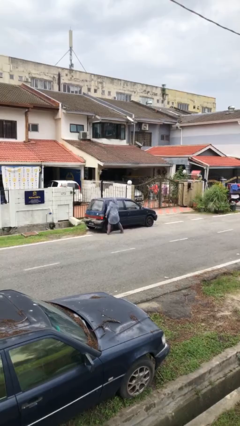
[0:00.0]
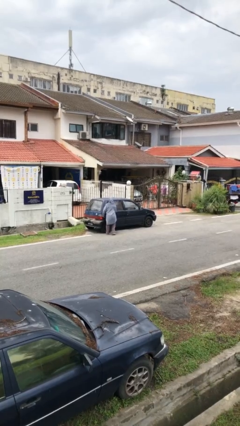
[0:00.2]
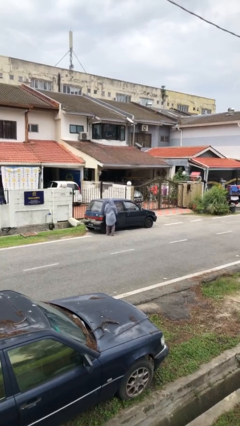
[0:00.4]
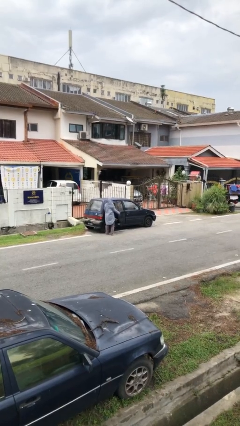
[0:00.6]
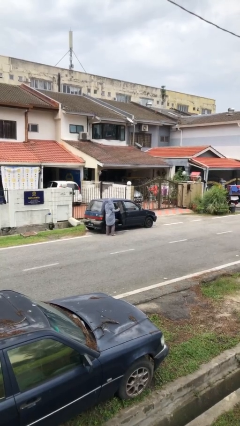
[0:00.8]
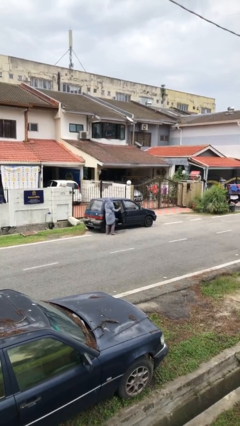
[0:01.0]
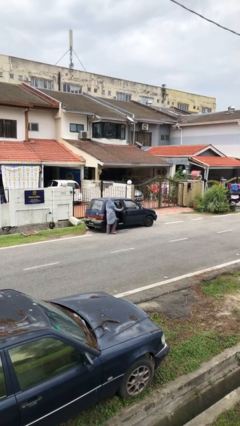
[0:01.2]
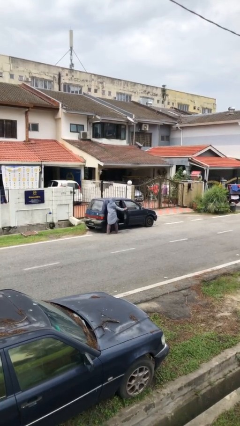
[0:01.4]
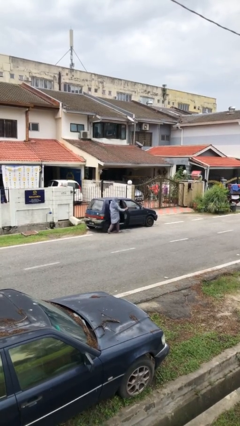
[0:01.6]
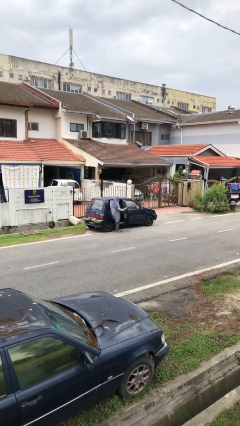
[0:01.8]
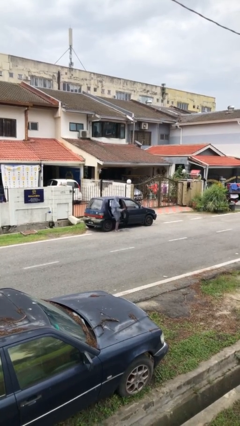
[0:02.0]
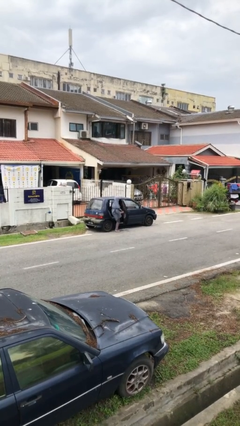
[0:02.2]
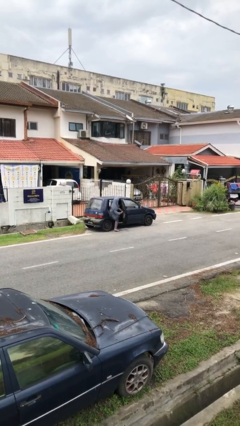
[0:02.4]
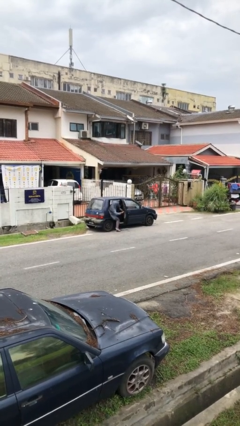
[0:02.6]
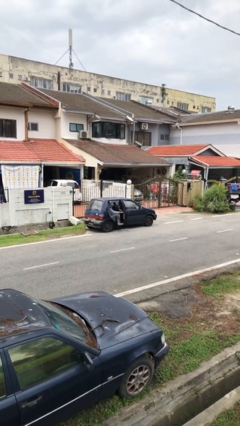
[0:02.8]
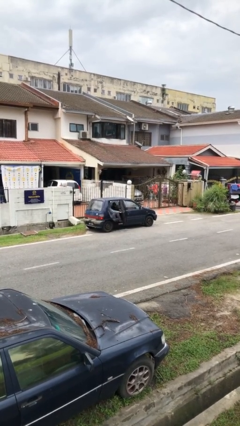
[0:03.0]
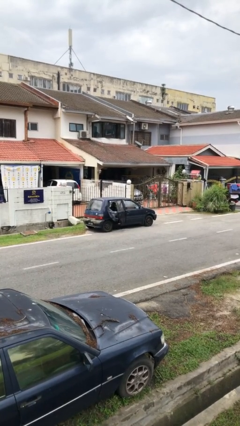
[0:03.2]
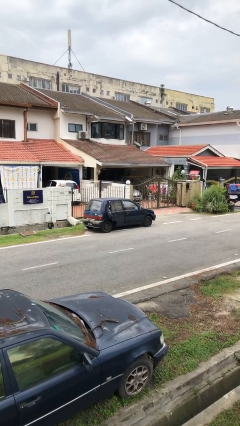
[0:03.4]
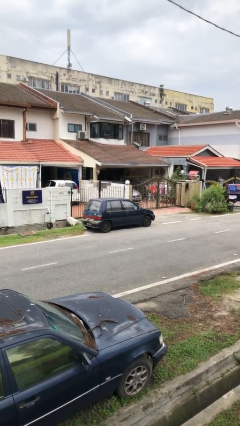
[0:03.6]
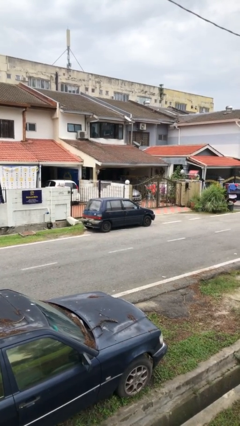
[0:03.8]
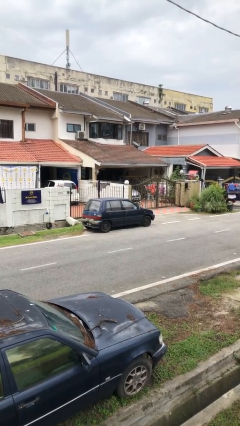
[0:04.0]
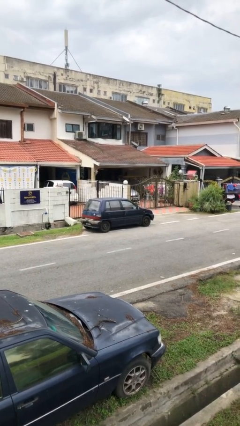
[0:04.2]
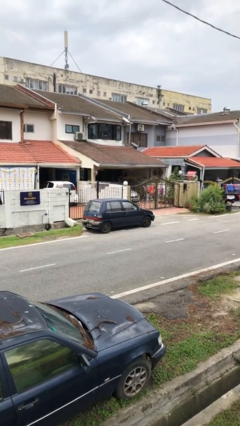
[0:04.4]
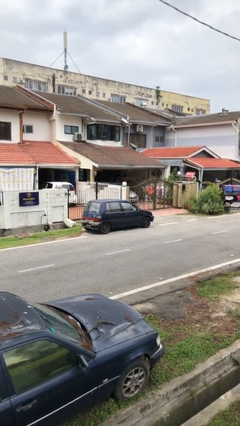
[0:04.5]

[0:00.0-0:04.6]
car picks up person

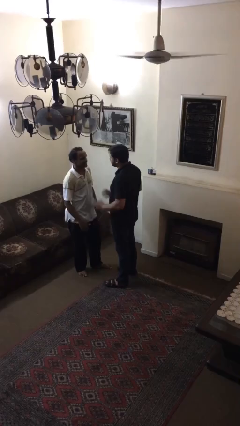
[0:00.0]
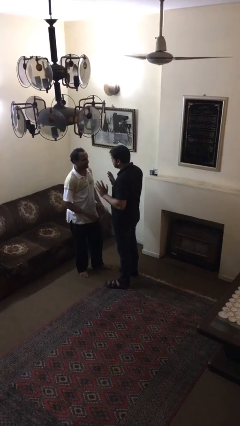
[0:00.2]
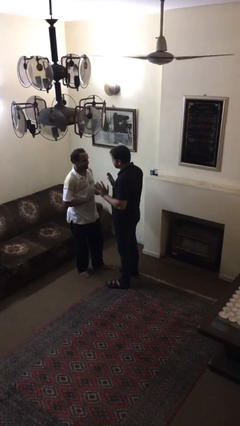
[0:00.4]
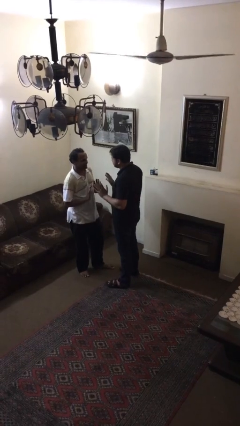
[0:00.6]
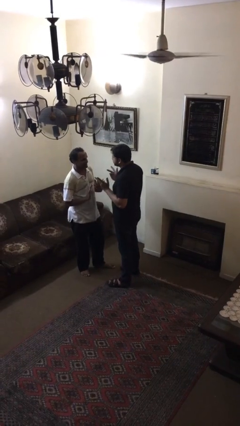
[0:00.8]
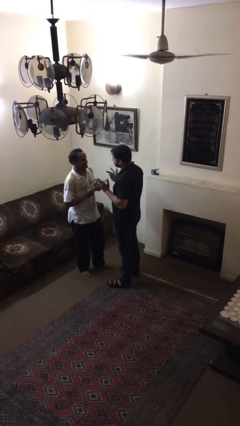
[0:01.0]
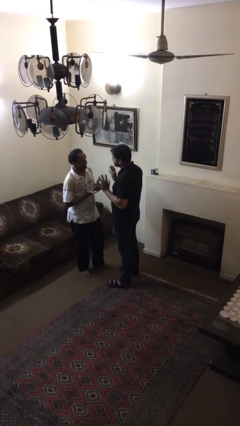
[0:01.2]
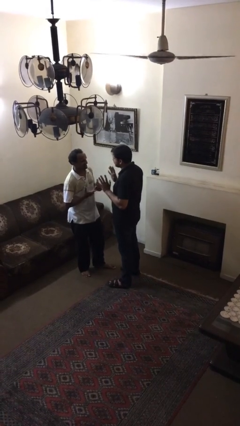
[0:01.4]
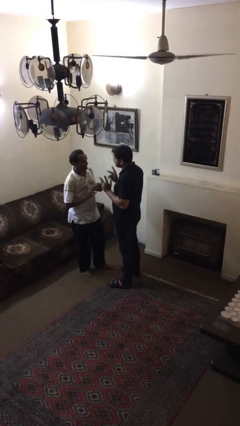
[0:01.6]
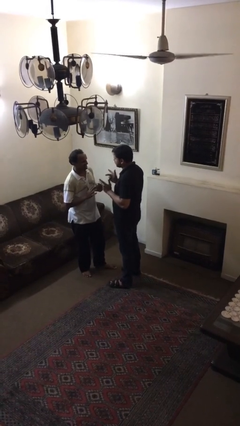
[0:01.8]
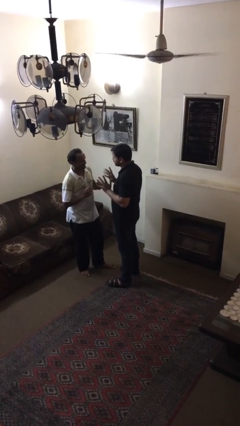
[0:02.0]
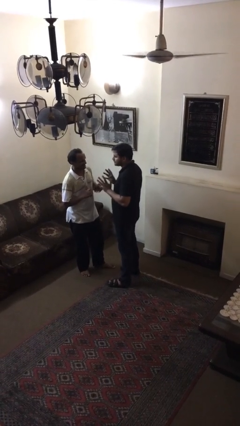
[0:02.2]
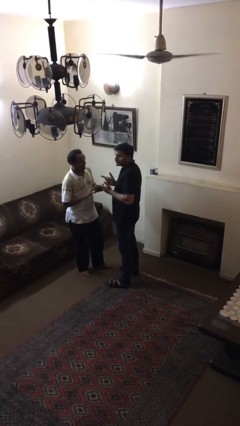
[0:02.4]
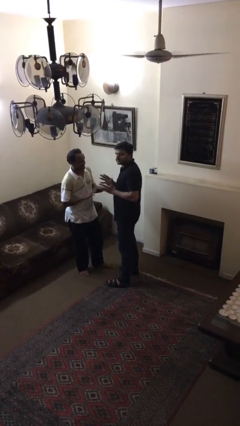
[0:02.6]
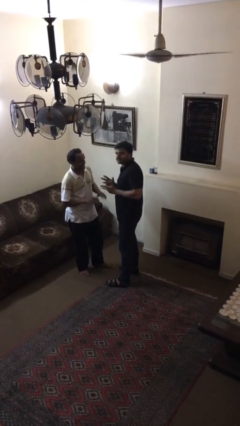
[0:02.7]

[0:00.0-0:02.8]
person talks to person

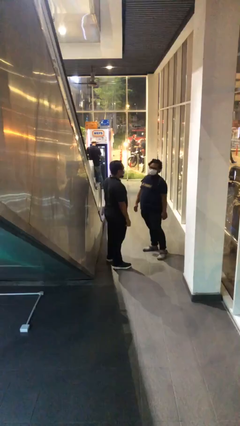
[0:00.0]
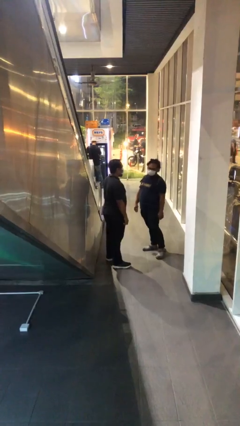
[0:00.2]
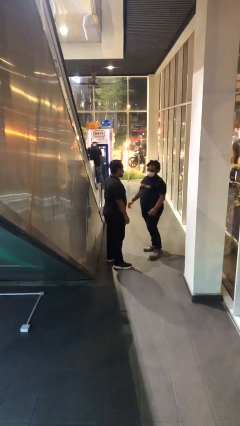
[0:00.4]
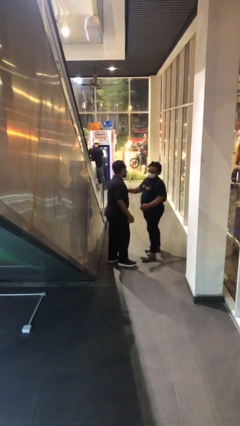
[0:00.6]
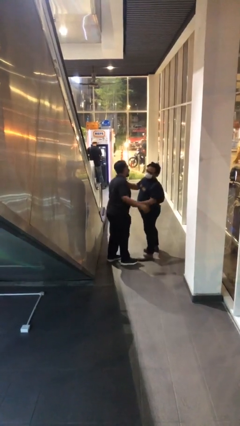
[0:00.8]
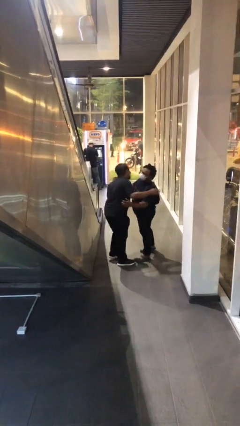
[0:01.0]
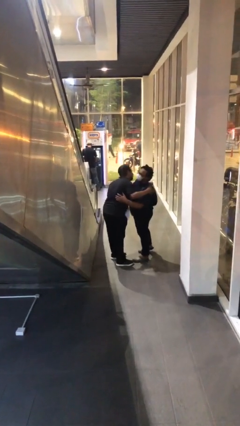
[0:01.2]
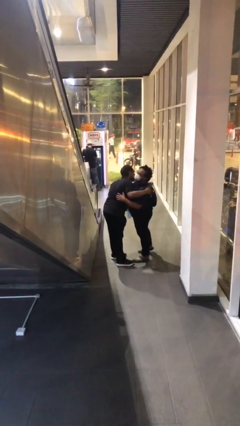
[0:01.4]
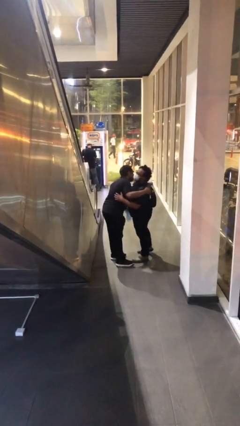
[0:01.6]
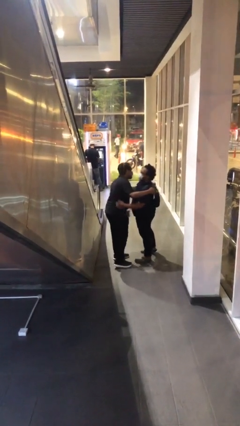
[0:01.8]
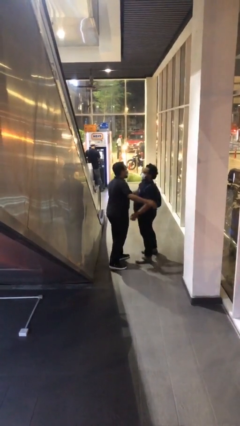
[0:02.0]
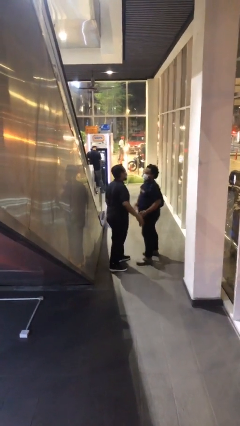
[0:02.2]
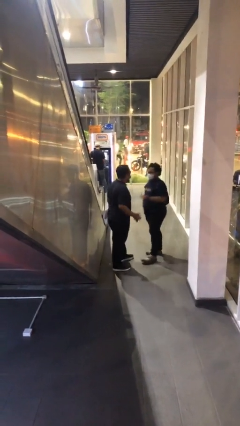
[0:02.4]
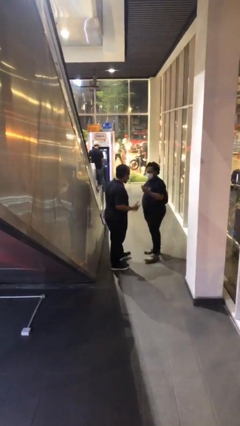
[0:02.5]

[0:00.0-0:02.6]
person embraces person

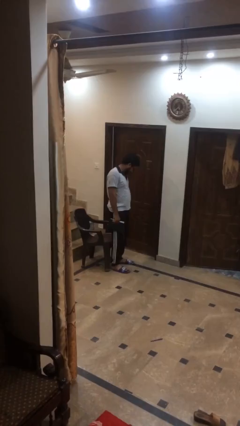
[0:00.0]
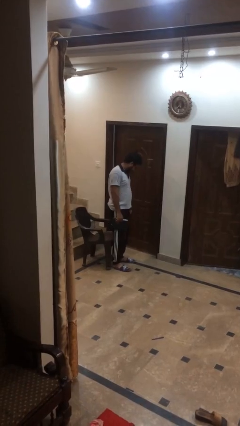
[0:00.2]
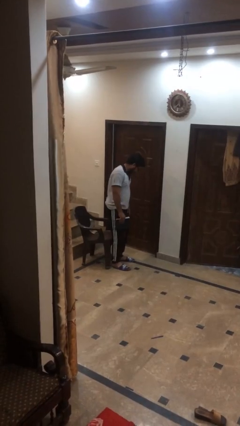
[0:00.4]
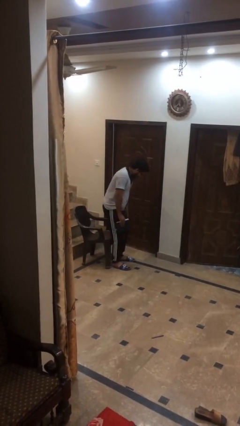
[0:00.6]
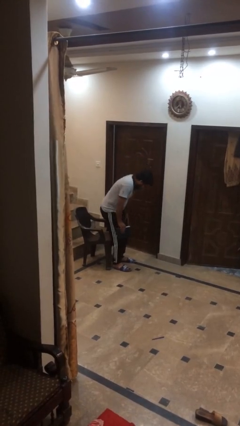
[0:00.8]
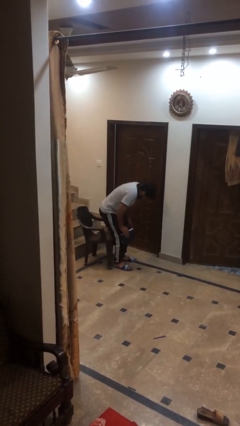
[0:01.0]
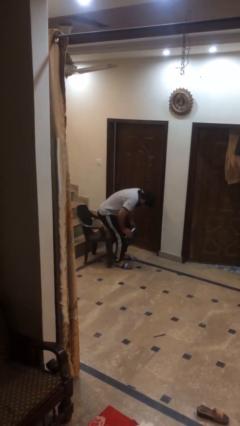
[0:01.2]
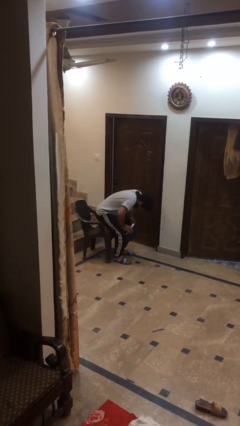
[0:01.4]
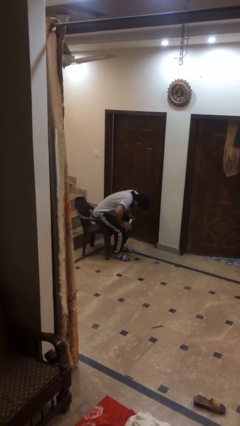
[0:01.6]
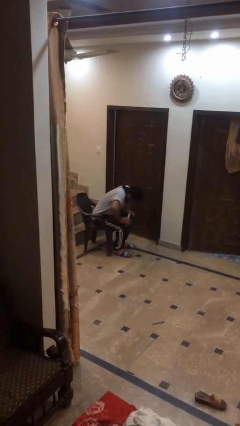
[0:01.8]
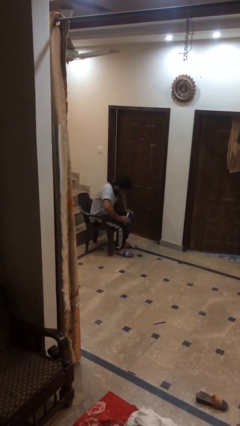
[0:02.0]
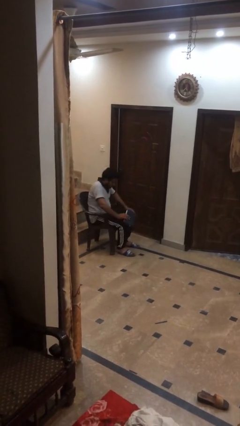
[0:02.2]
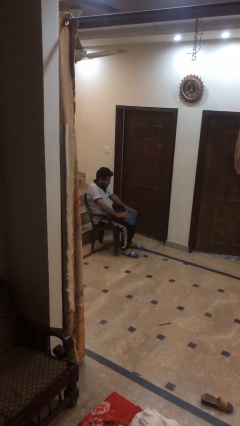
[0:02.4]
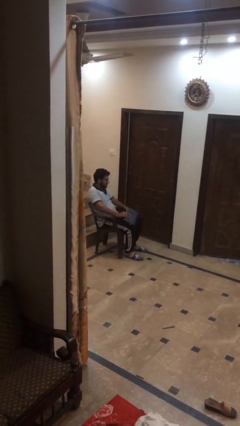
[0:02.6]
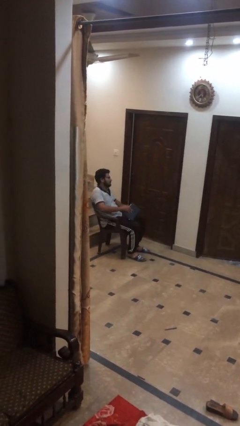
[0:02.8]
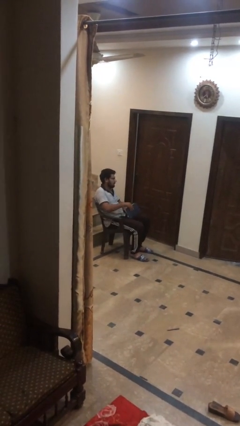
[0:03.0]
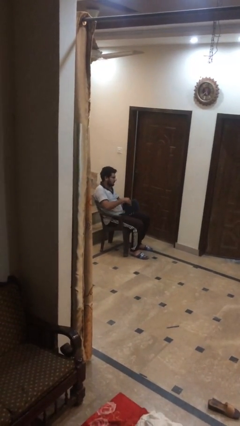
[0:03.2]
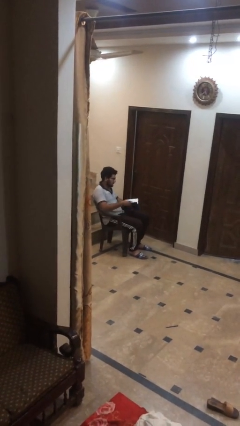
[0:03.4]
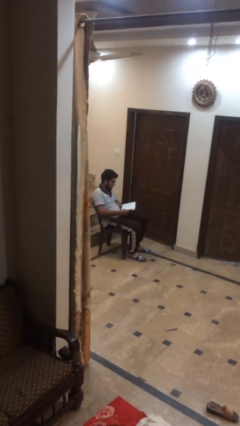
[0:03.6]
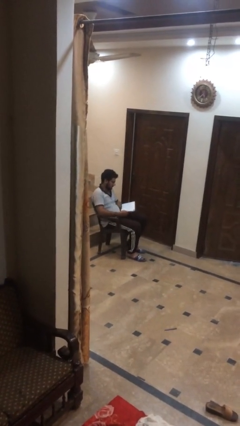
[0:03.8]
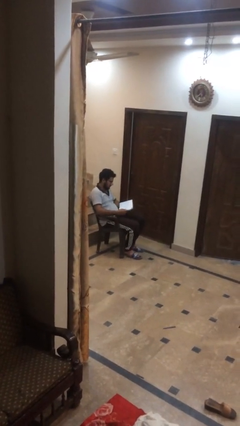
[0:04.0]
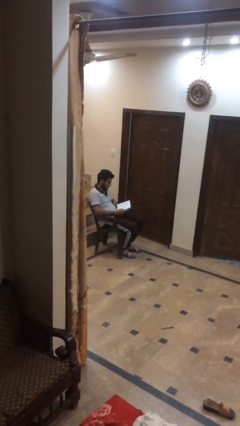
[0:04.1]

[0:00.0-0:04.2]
person sits down

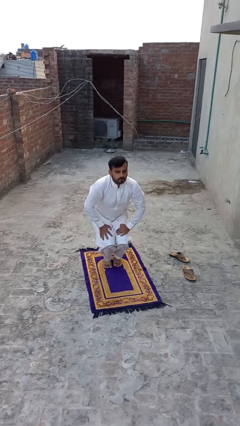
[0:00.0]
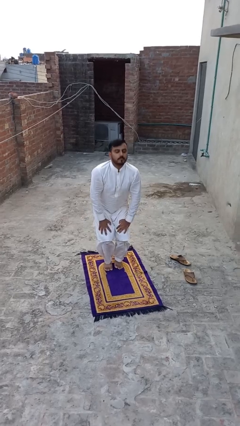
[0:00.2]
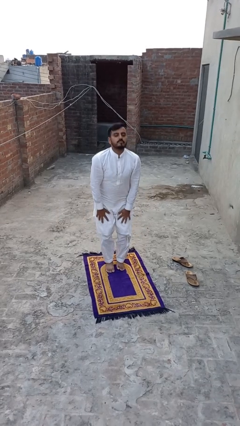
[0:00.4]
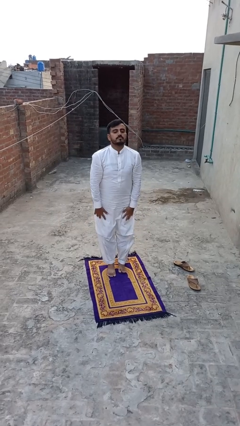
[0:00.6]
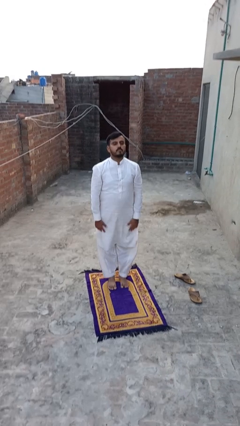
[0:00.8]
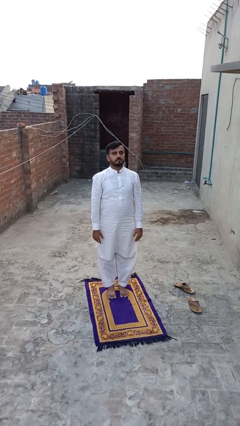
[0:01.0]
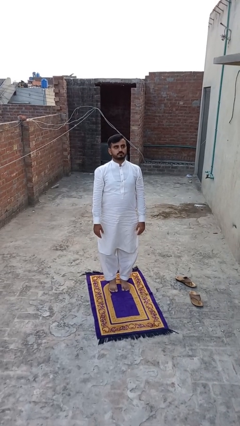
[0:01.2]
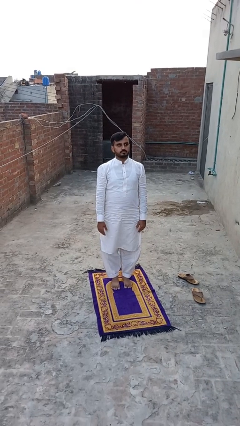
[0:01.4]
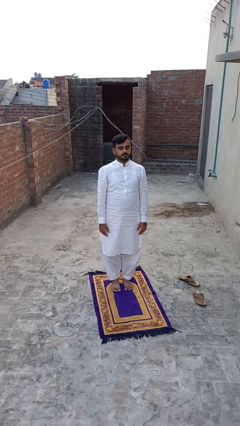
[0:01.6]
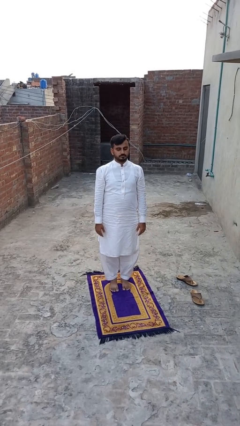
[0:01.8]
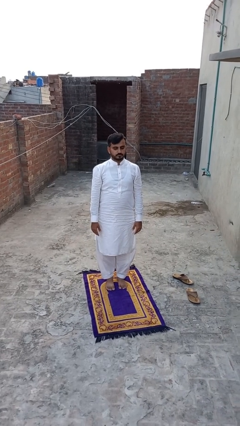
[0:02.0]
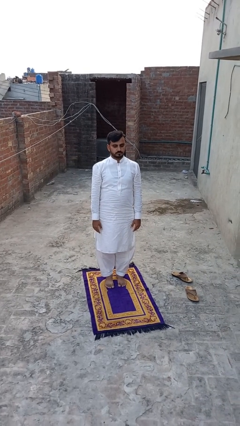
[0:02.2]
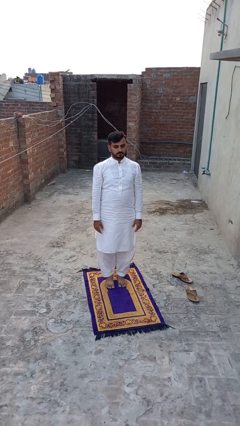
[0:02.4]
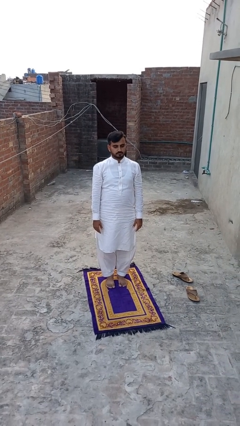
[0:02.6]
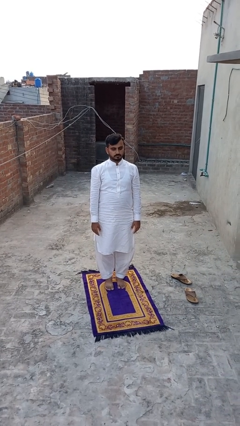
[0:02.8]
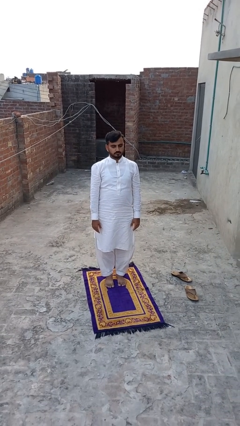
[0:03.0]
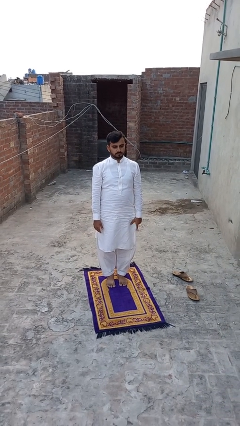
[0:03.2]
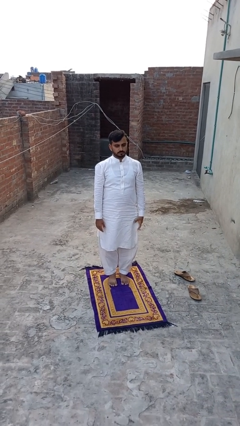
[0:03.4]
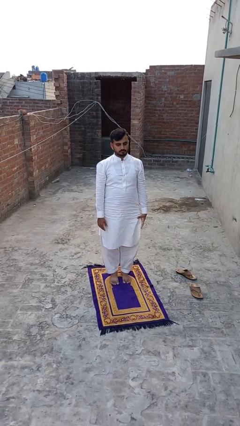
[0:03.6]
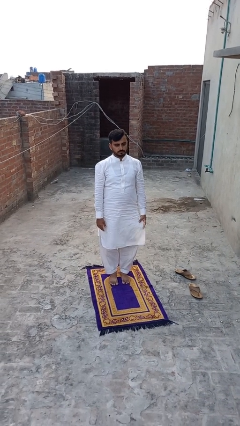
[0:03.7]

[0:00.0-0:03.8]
person stands up from floor
